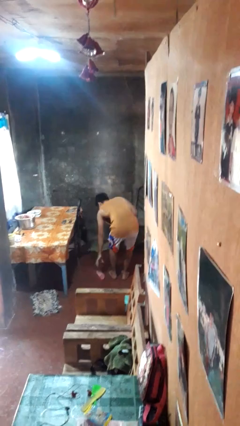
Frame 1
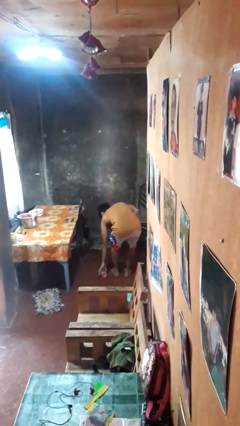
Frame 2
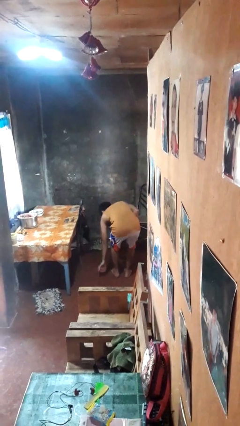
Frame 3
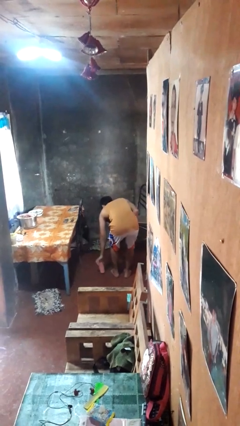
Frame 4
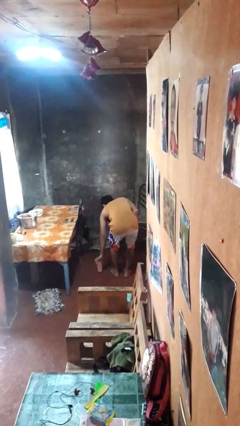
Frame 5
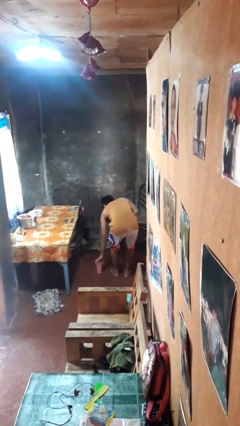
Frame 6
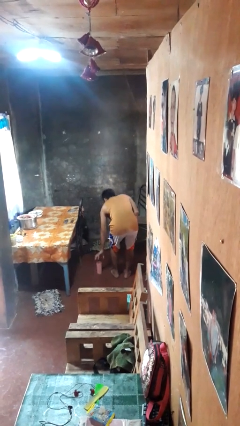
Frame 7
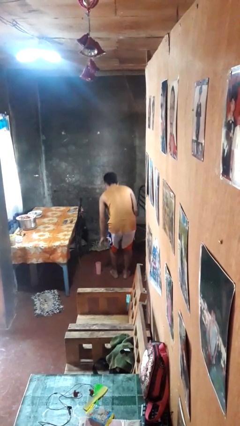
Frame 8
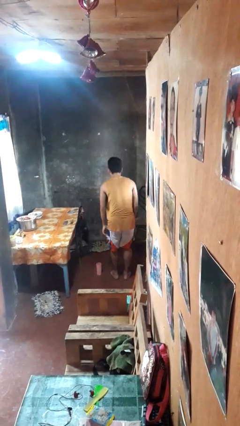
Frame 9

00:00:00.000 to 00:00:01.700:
person sets upright glass

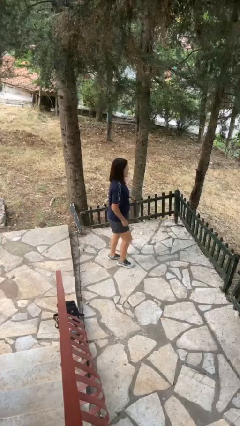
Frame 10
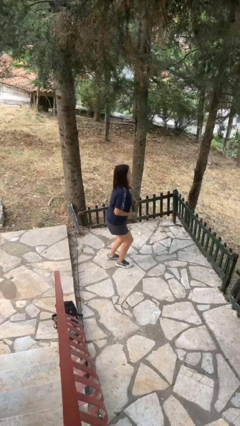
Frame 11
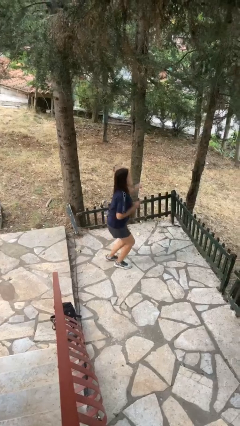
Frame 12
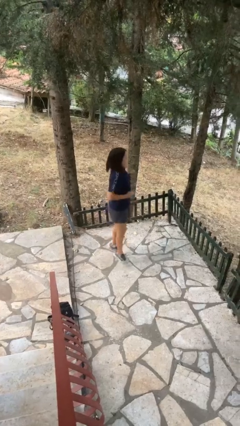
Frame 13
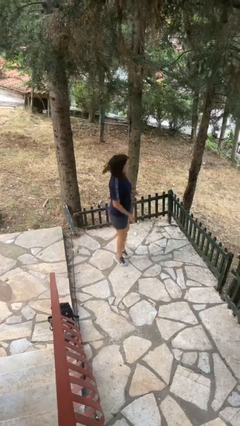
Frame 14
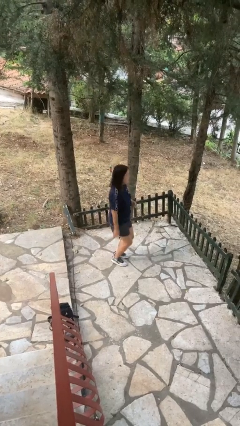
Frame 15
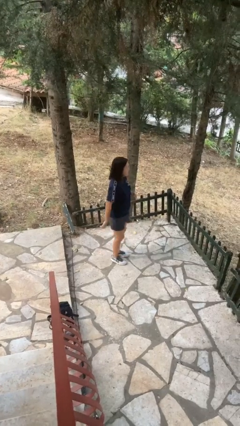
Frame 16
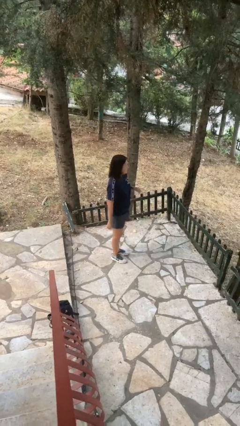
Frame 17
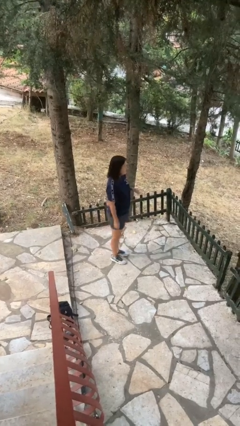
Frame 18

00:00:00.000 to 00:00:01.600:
person jumps

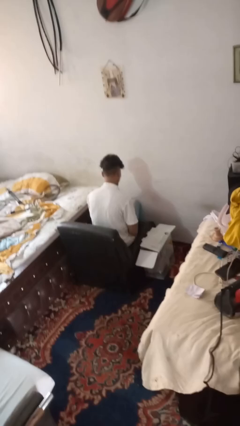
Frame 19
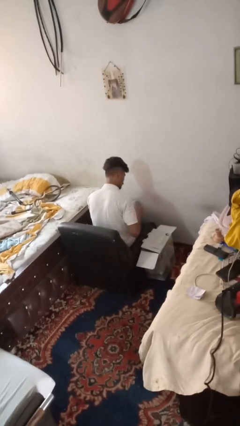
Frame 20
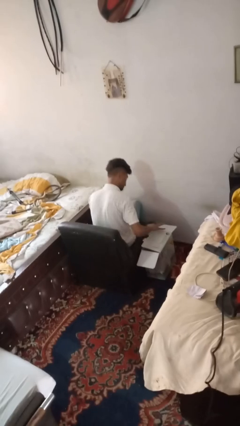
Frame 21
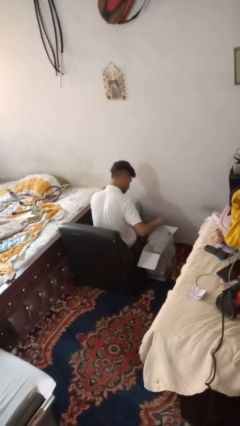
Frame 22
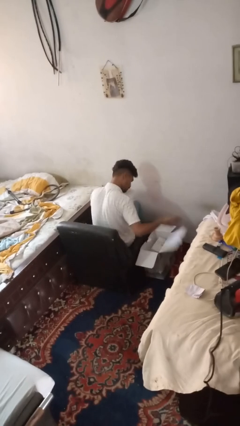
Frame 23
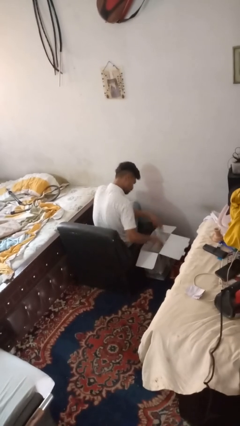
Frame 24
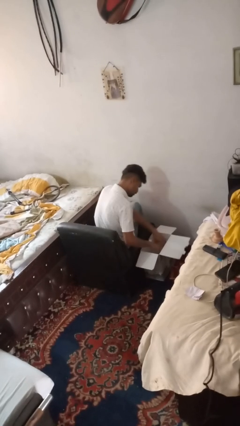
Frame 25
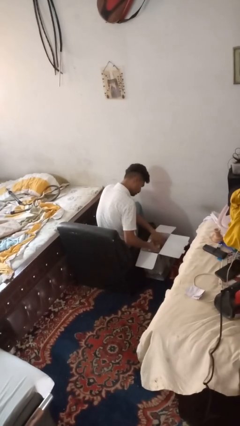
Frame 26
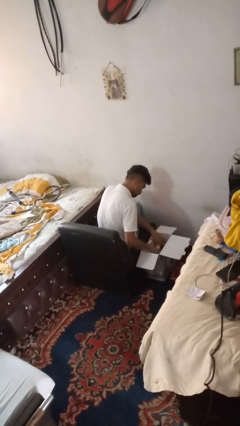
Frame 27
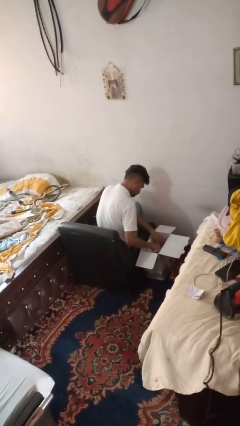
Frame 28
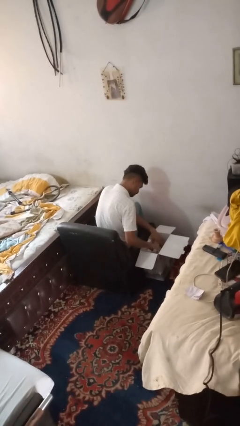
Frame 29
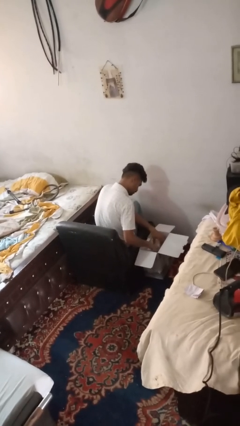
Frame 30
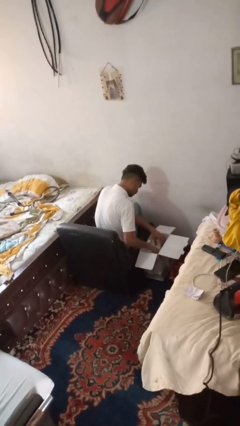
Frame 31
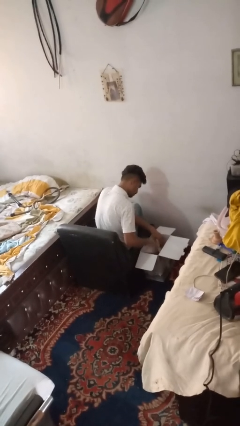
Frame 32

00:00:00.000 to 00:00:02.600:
person searches in box

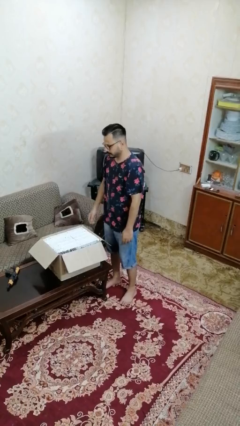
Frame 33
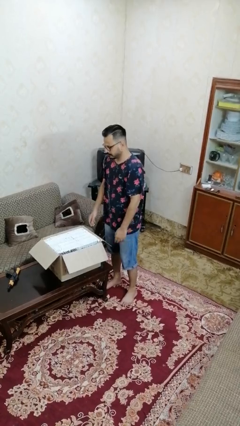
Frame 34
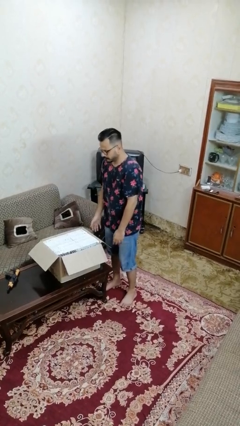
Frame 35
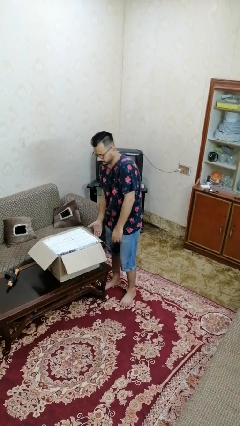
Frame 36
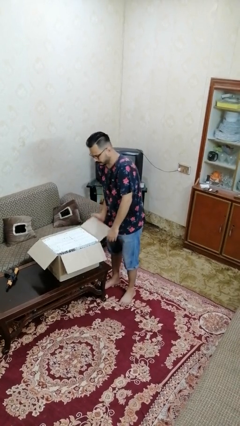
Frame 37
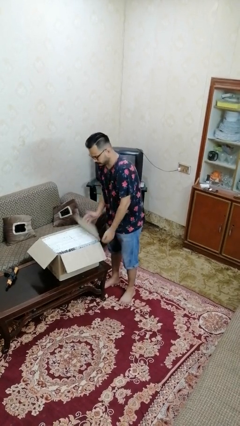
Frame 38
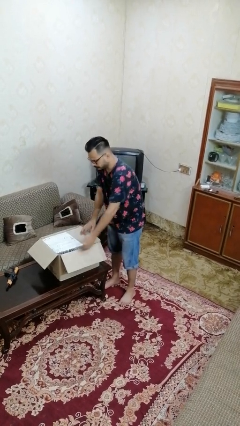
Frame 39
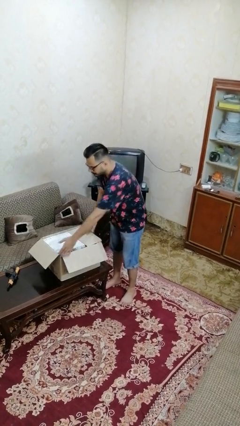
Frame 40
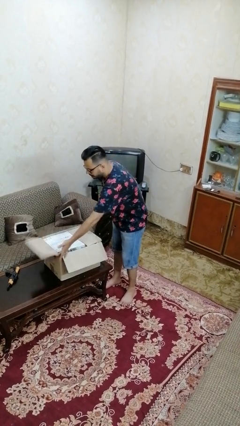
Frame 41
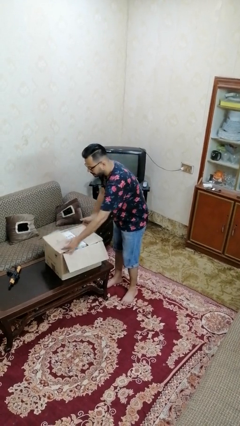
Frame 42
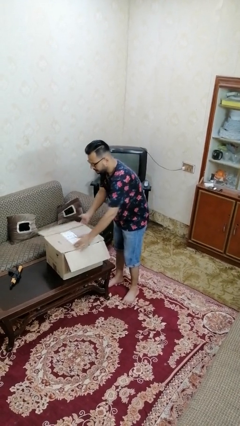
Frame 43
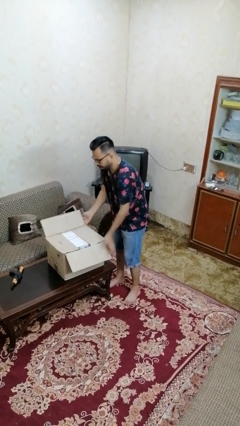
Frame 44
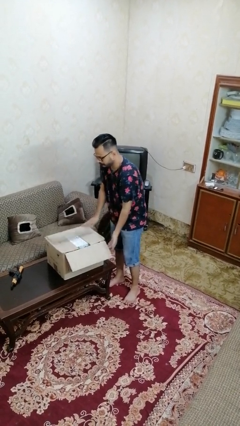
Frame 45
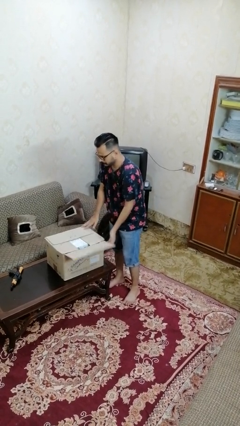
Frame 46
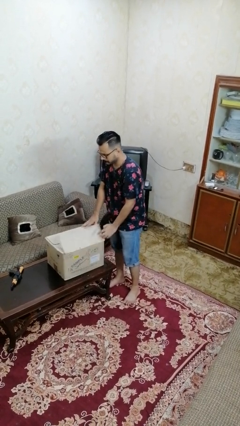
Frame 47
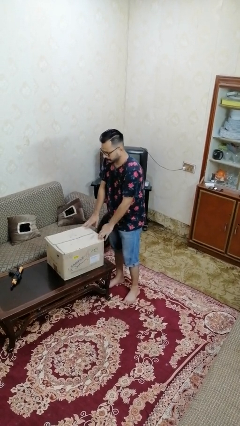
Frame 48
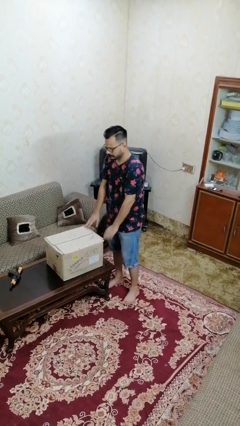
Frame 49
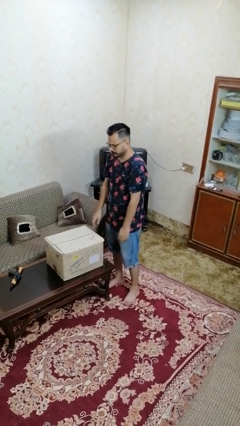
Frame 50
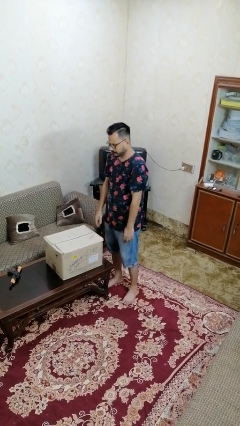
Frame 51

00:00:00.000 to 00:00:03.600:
person closes box

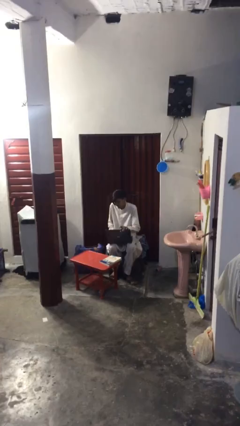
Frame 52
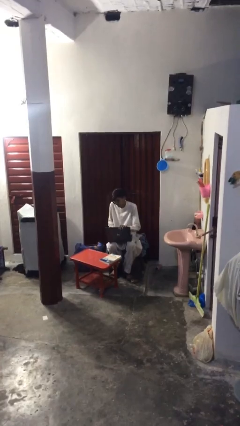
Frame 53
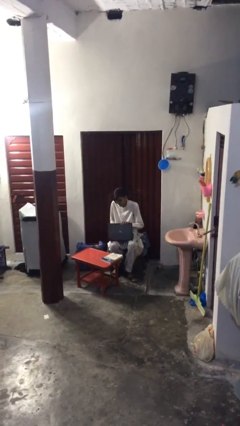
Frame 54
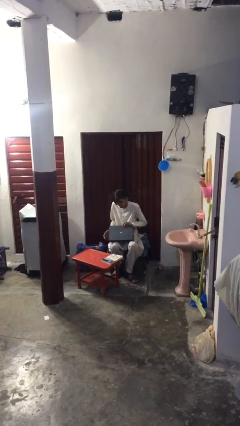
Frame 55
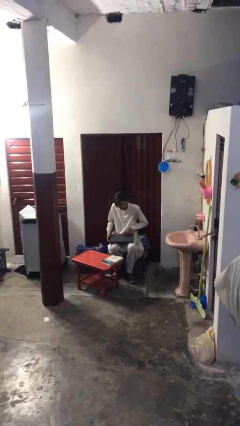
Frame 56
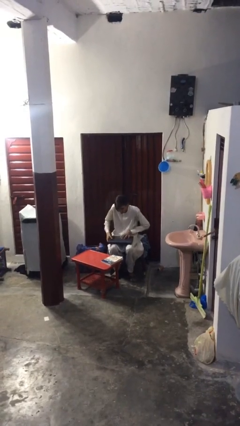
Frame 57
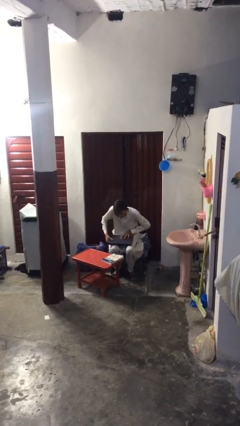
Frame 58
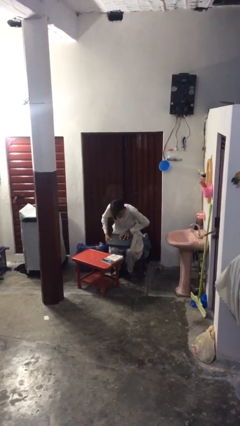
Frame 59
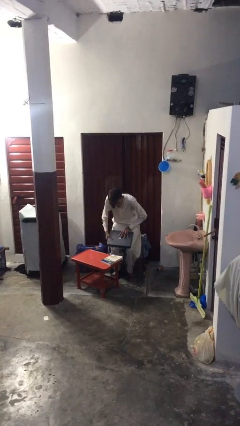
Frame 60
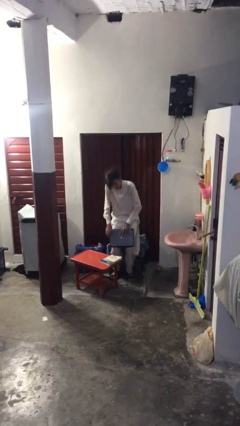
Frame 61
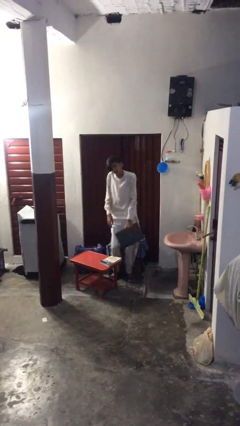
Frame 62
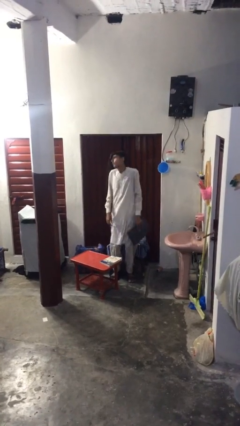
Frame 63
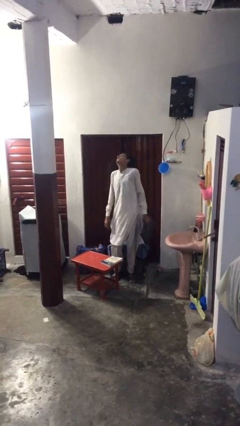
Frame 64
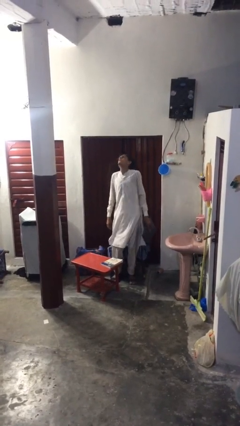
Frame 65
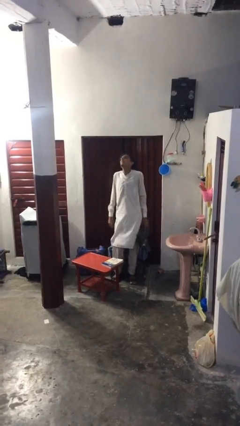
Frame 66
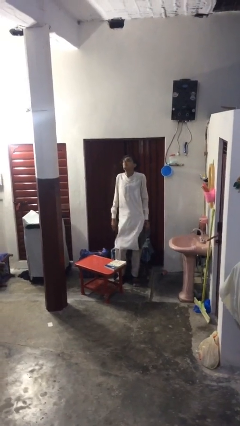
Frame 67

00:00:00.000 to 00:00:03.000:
person stands up

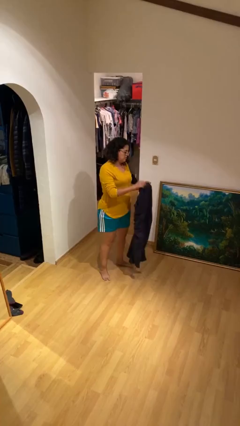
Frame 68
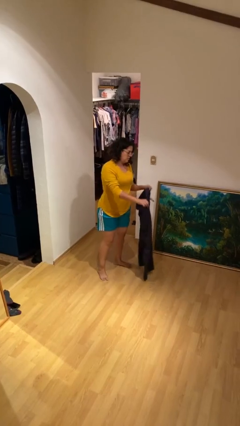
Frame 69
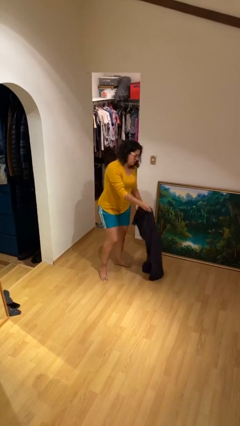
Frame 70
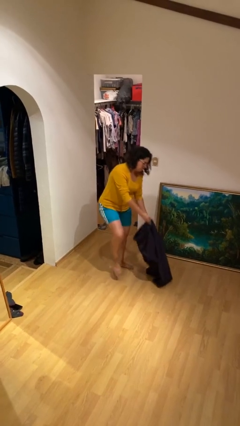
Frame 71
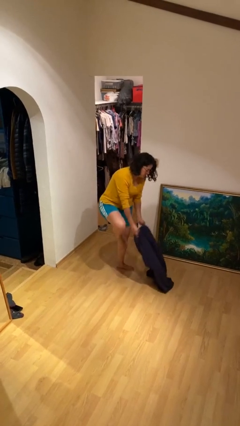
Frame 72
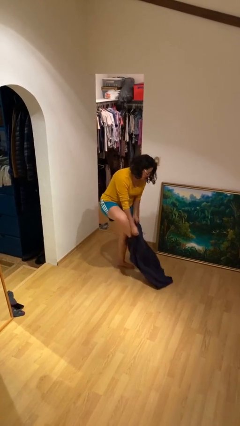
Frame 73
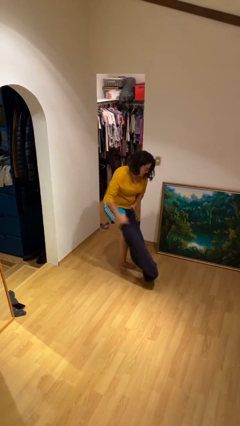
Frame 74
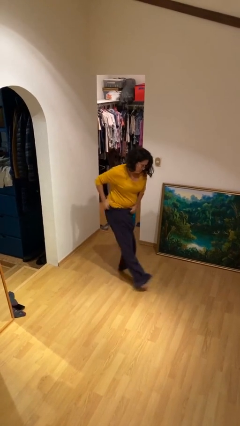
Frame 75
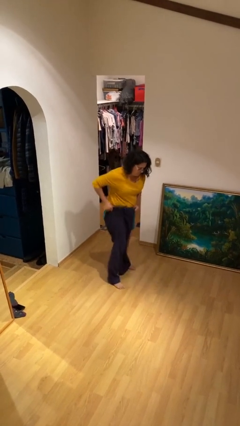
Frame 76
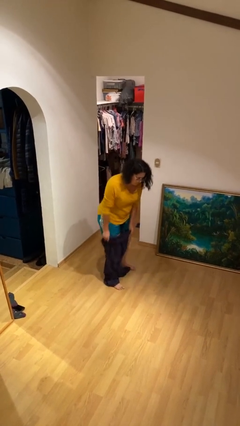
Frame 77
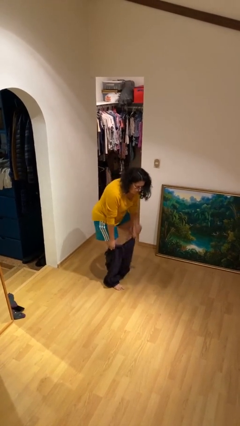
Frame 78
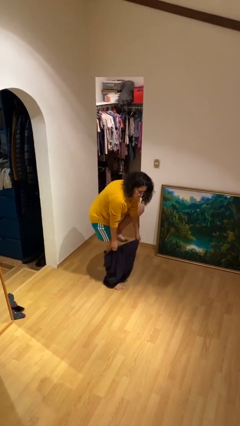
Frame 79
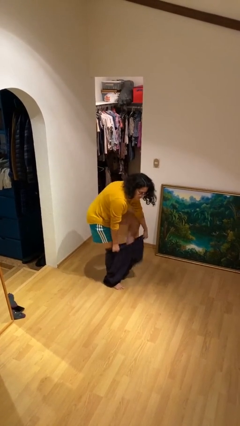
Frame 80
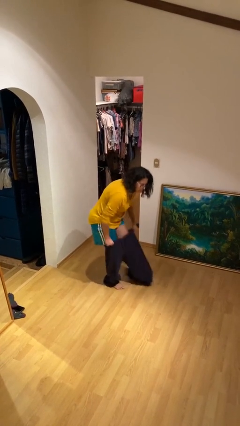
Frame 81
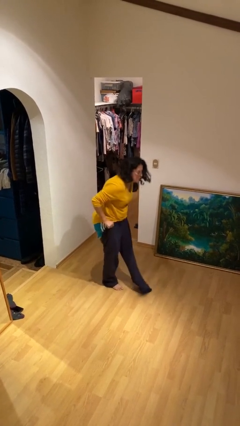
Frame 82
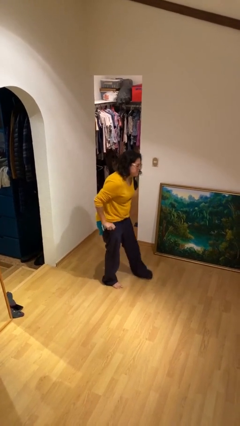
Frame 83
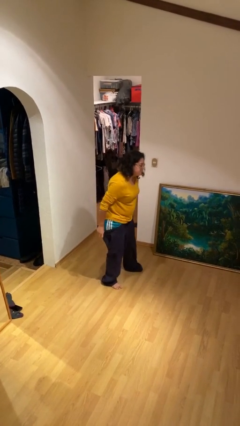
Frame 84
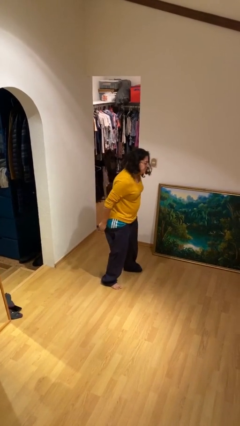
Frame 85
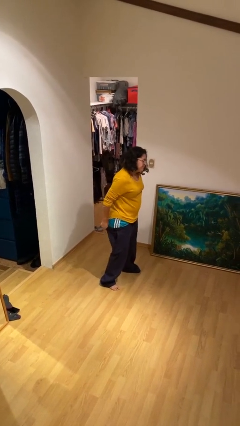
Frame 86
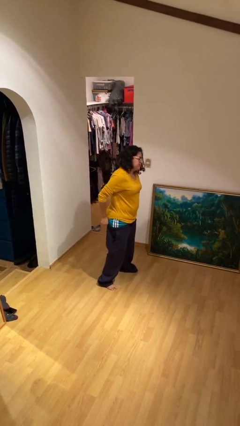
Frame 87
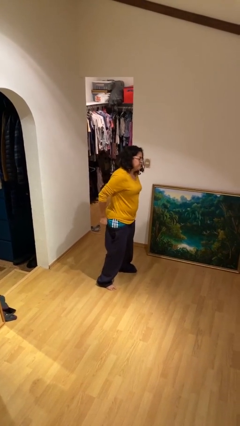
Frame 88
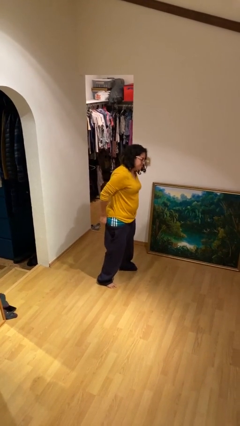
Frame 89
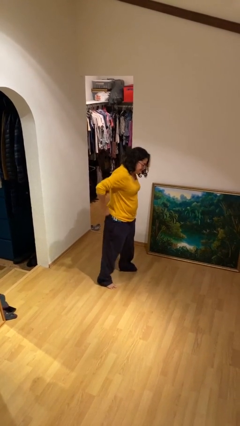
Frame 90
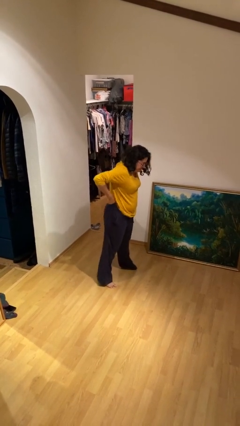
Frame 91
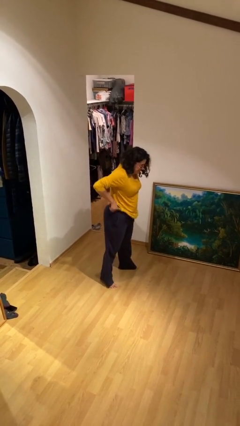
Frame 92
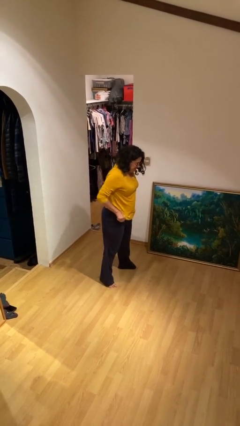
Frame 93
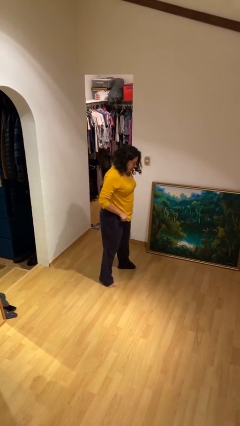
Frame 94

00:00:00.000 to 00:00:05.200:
person puts on pants
